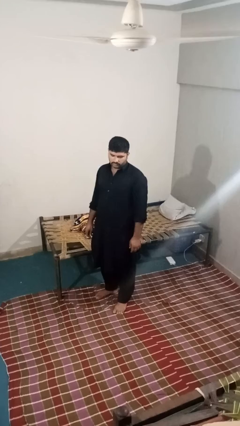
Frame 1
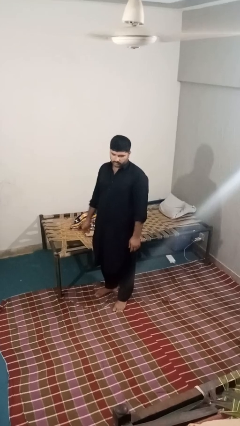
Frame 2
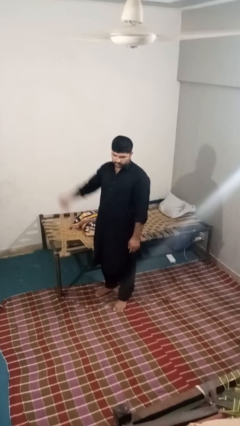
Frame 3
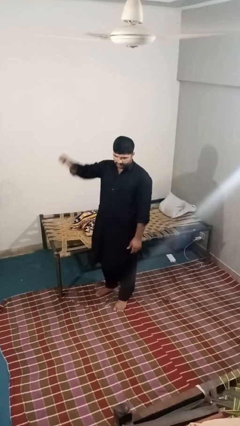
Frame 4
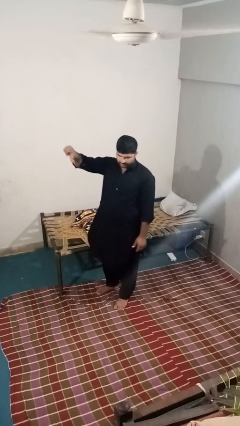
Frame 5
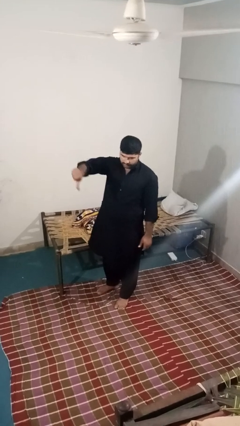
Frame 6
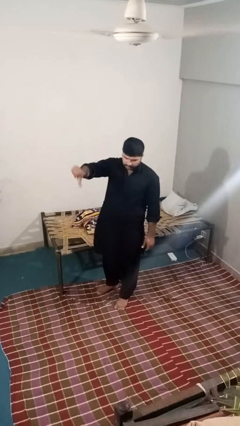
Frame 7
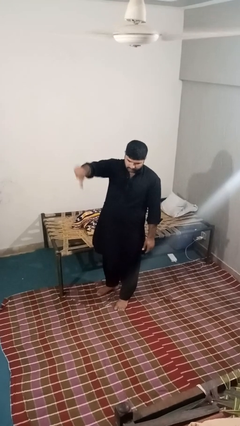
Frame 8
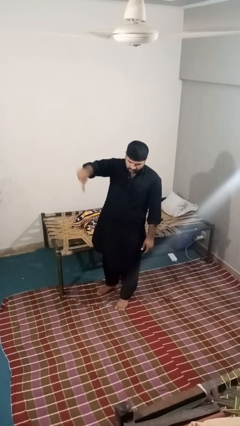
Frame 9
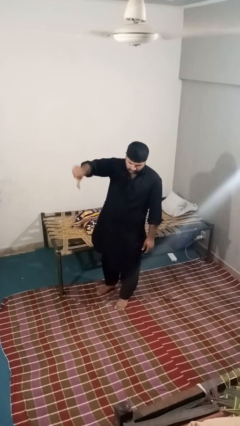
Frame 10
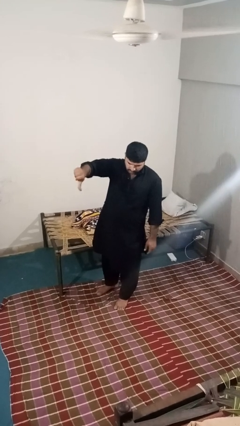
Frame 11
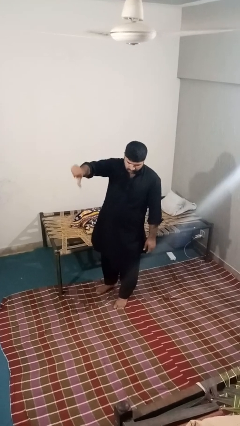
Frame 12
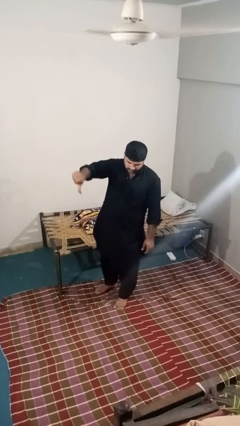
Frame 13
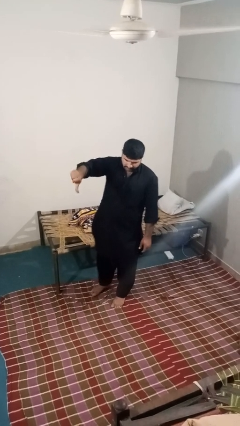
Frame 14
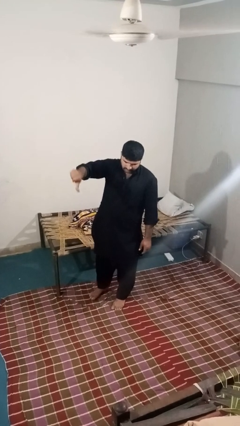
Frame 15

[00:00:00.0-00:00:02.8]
person gestures thumbs down

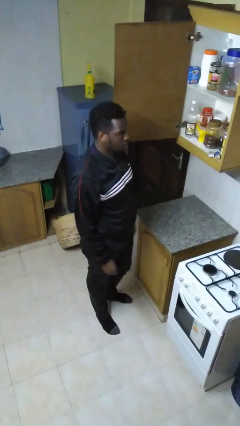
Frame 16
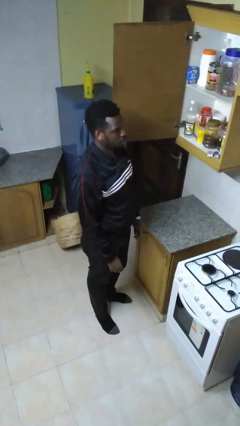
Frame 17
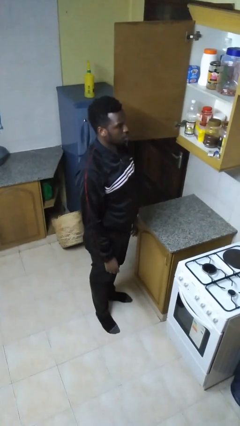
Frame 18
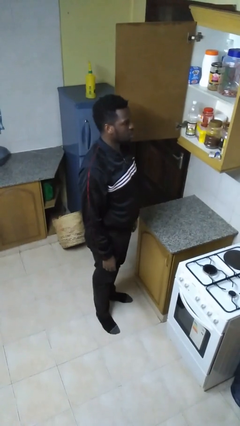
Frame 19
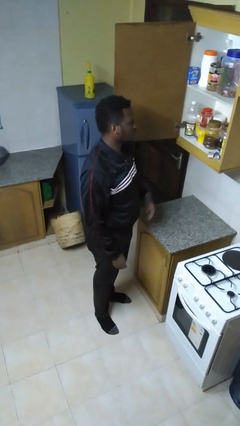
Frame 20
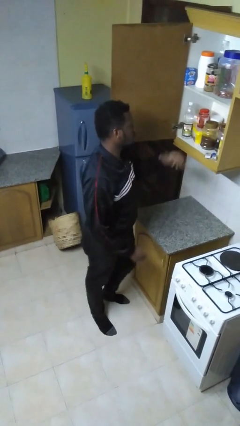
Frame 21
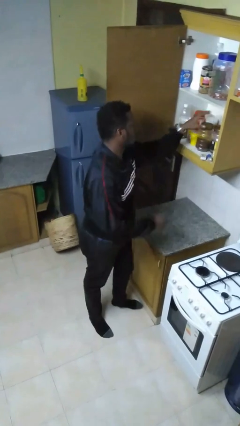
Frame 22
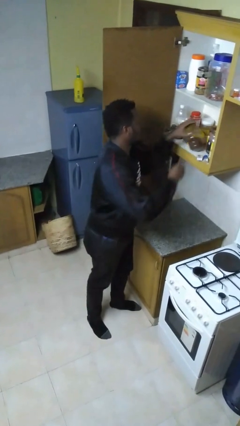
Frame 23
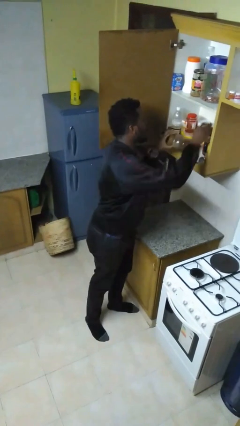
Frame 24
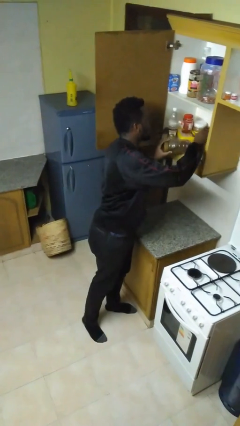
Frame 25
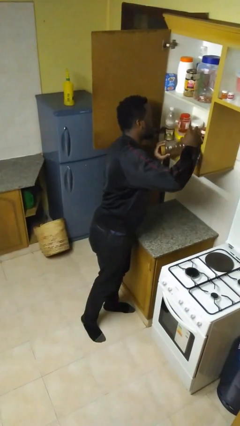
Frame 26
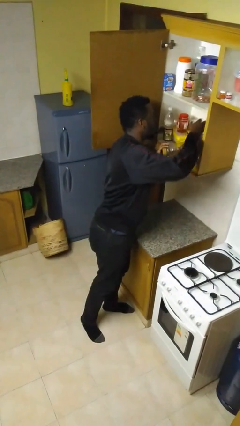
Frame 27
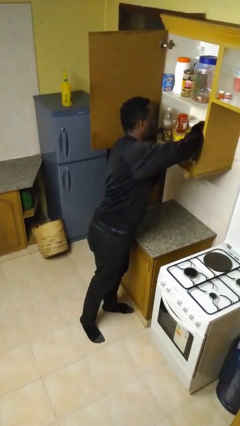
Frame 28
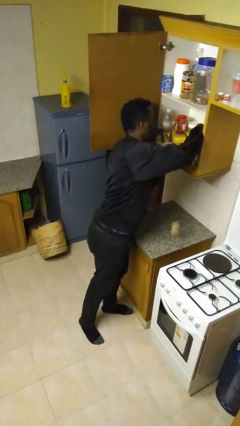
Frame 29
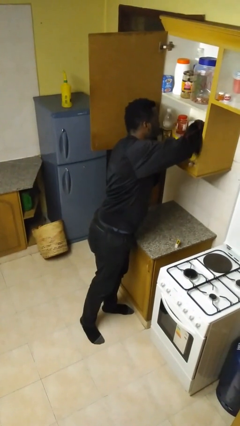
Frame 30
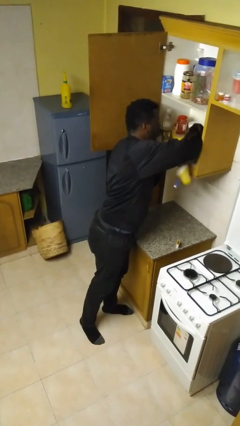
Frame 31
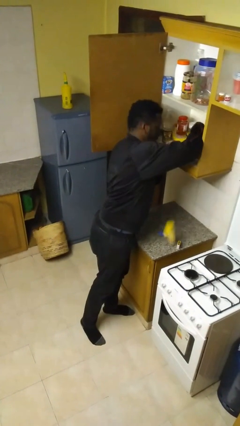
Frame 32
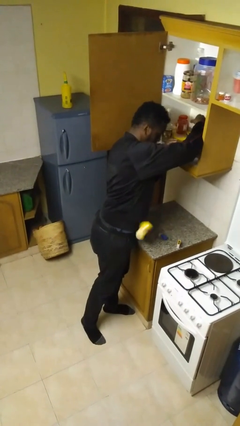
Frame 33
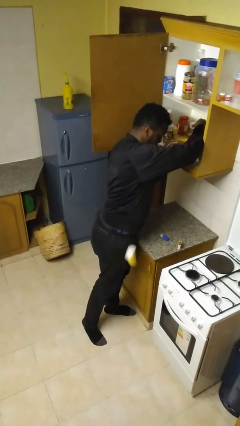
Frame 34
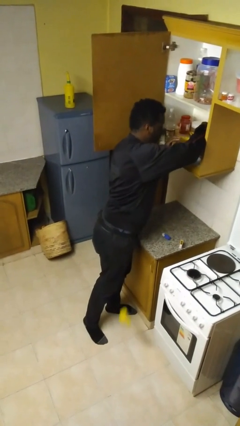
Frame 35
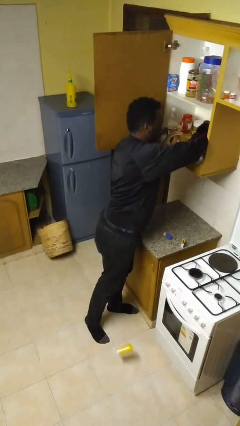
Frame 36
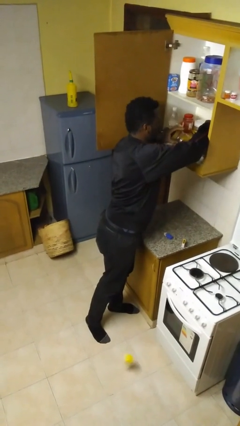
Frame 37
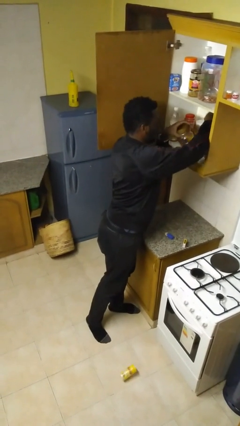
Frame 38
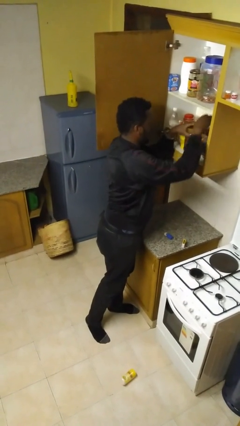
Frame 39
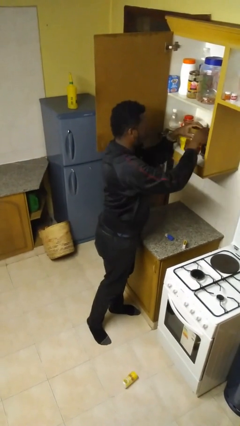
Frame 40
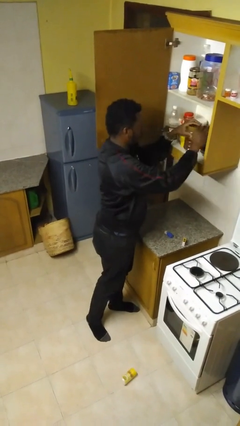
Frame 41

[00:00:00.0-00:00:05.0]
person searches in cabinet

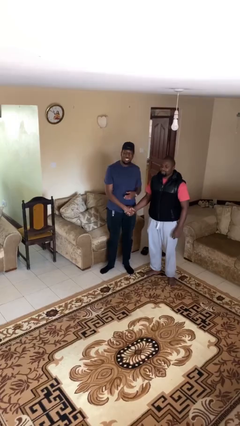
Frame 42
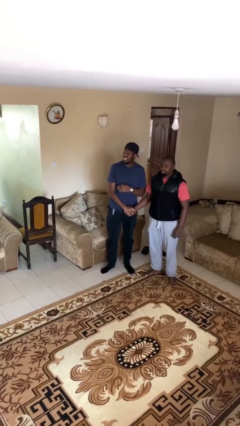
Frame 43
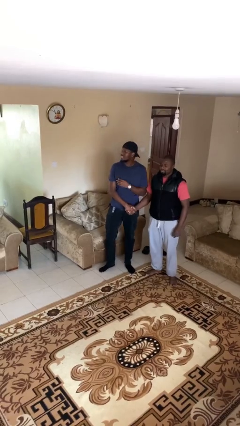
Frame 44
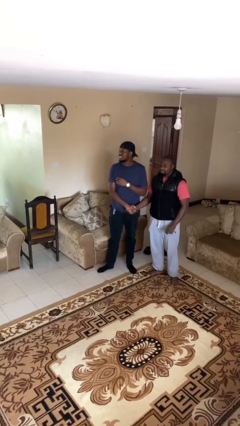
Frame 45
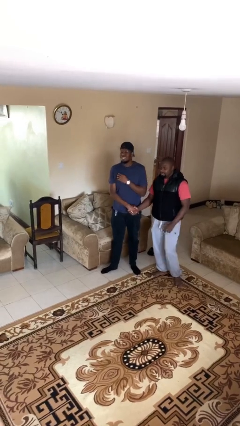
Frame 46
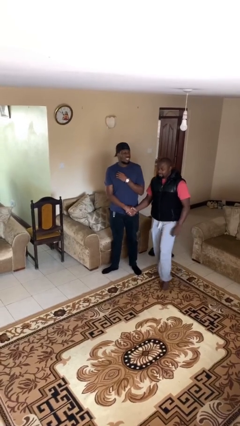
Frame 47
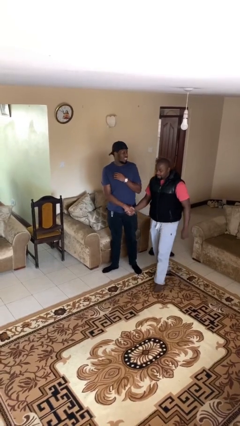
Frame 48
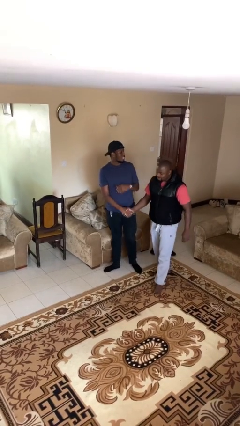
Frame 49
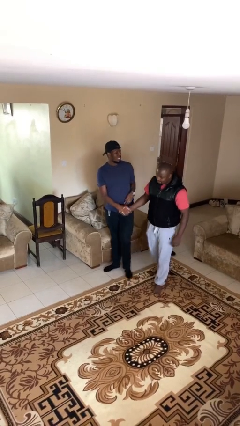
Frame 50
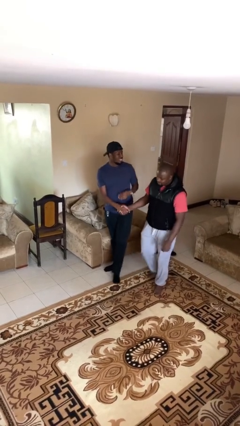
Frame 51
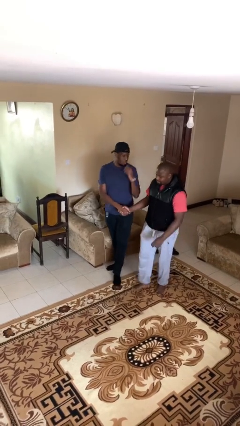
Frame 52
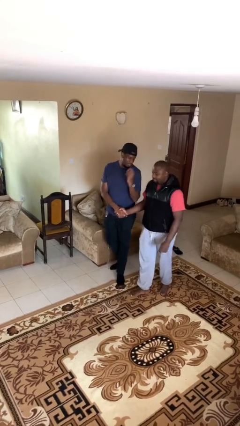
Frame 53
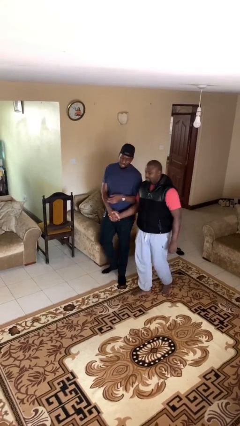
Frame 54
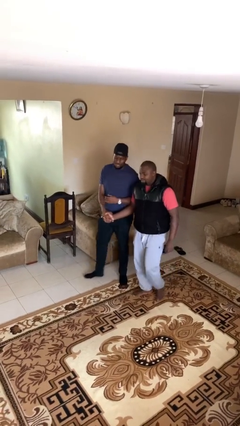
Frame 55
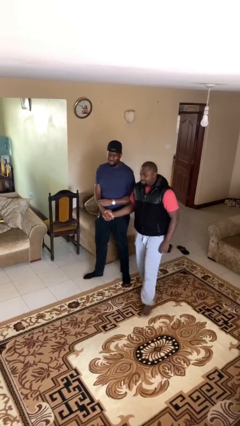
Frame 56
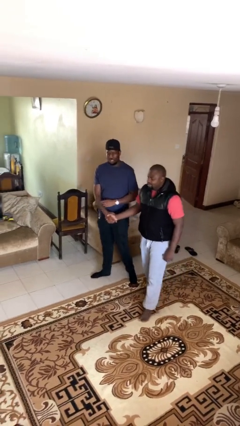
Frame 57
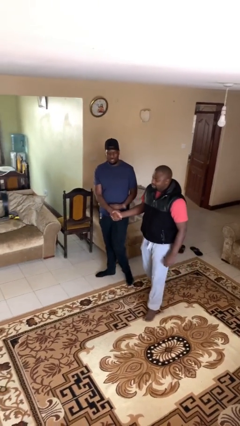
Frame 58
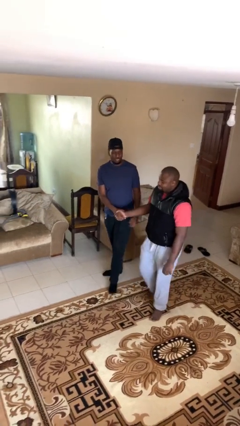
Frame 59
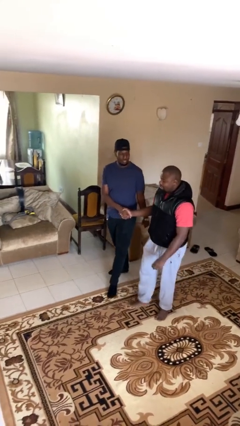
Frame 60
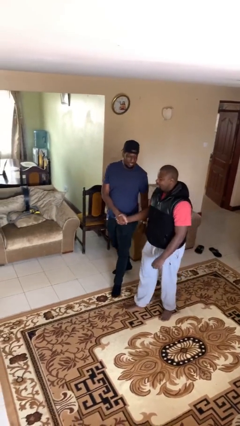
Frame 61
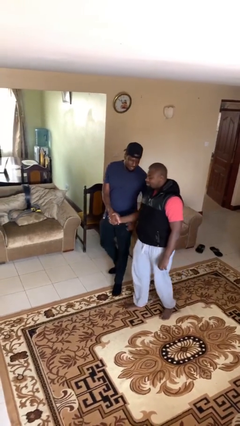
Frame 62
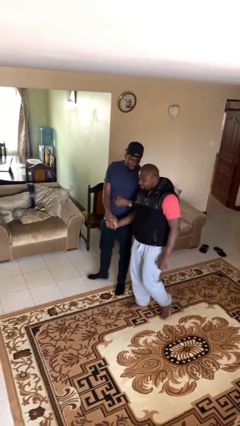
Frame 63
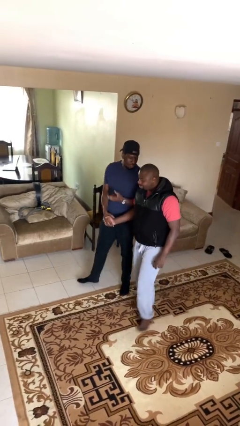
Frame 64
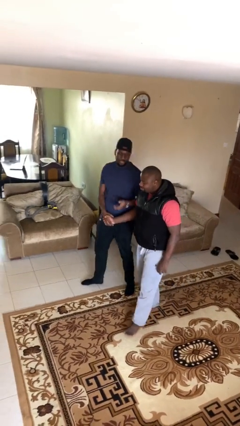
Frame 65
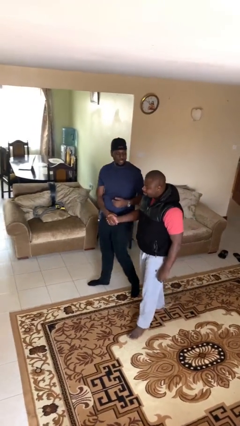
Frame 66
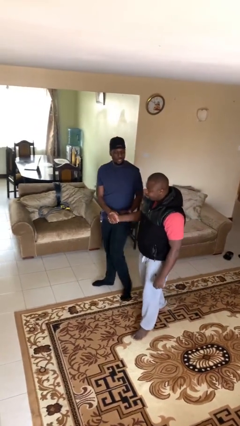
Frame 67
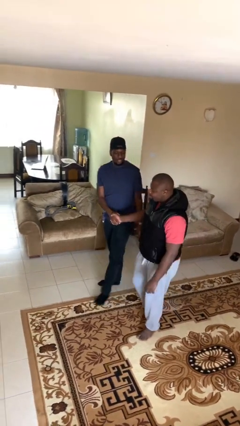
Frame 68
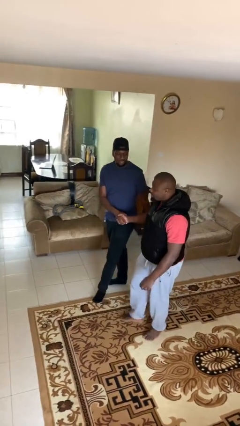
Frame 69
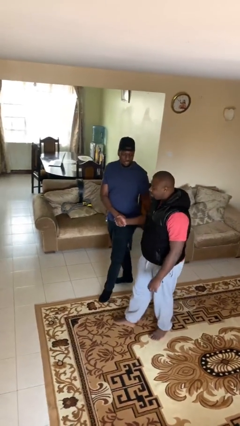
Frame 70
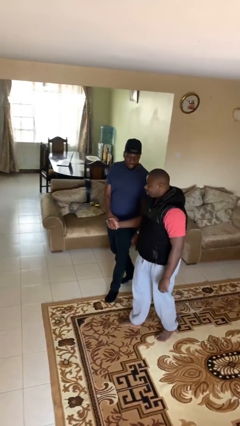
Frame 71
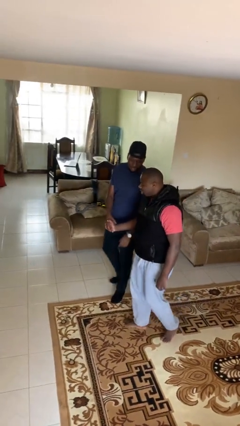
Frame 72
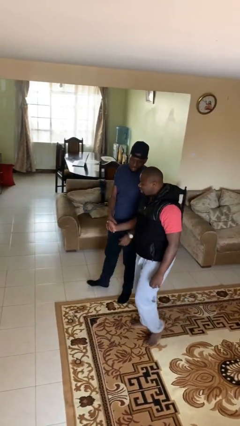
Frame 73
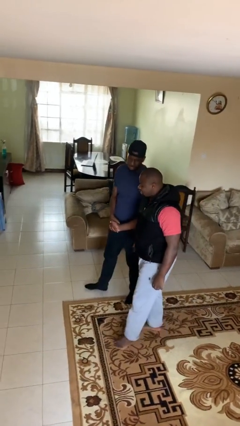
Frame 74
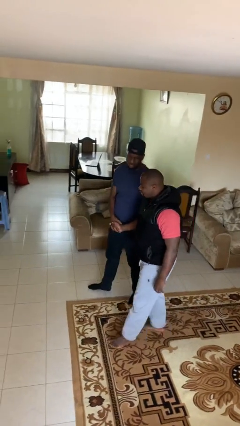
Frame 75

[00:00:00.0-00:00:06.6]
person holds hand

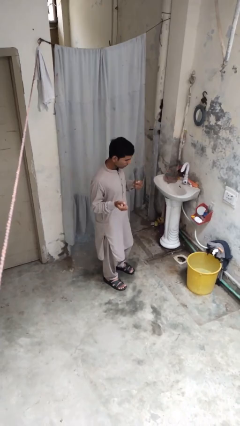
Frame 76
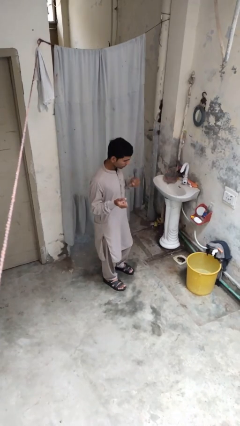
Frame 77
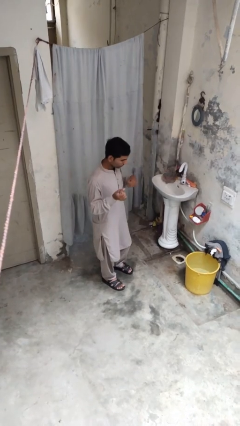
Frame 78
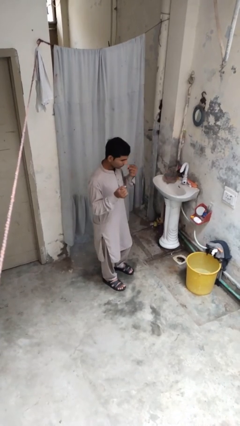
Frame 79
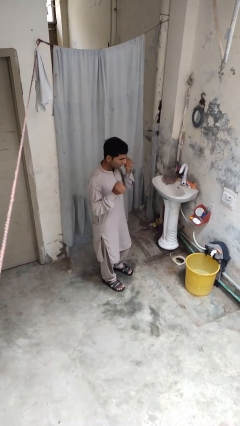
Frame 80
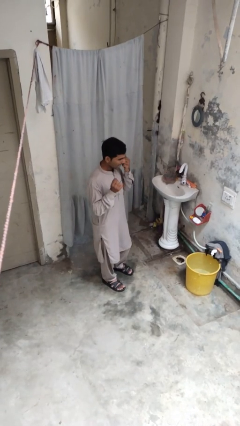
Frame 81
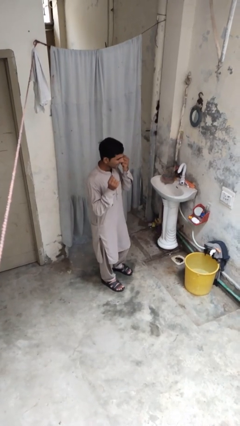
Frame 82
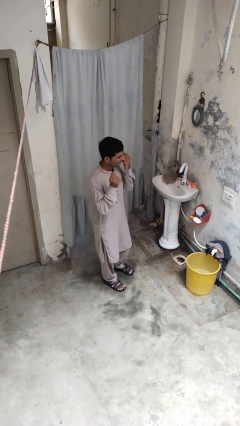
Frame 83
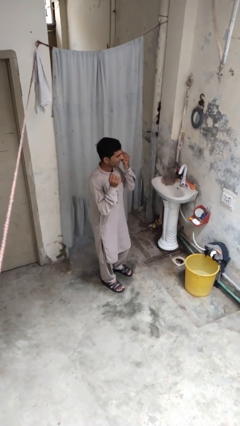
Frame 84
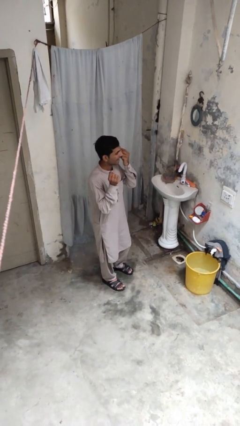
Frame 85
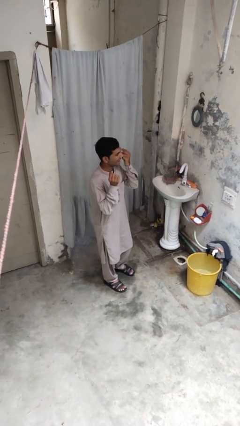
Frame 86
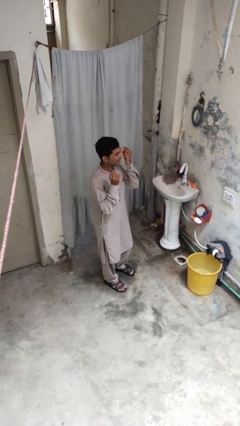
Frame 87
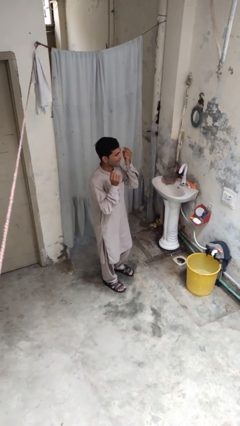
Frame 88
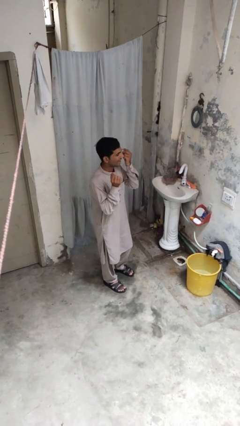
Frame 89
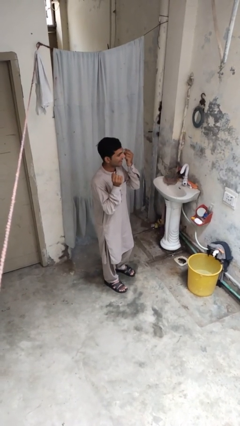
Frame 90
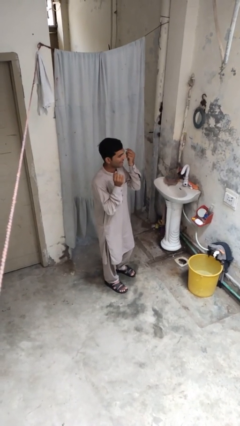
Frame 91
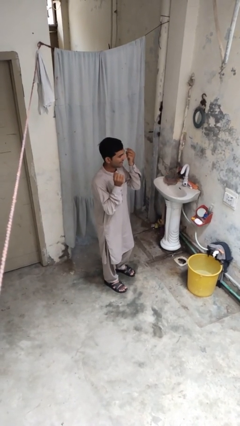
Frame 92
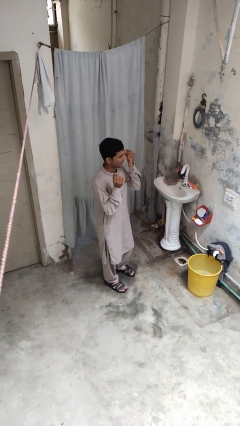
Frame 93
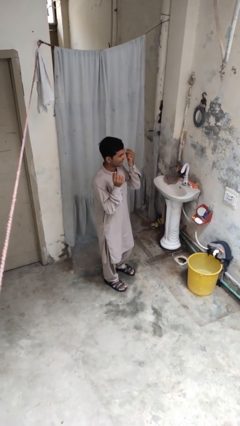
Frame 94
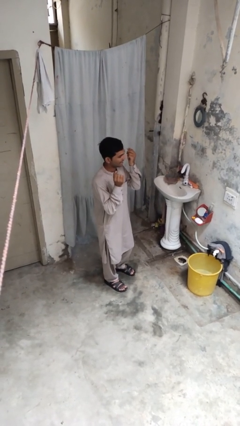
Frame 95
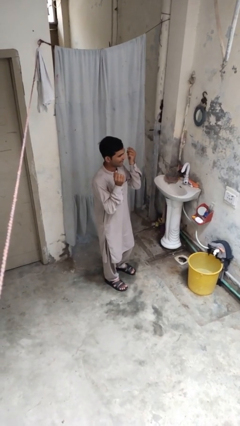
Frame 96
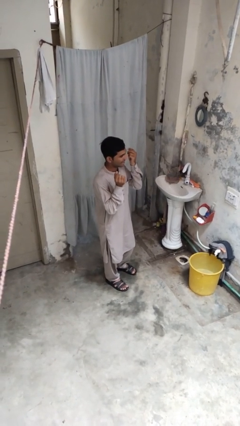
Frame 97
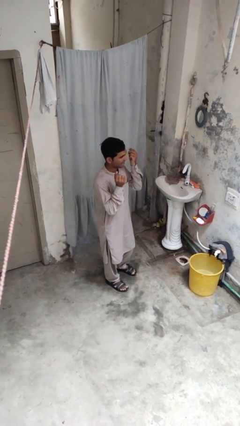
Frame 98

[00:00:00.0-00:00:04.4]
person flosses
